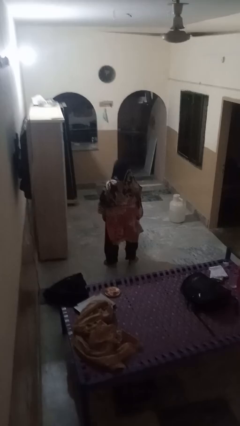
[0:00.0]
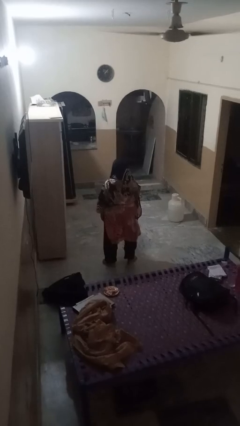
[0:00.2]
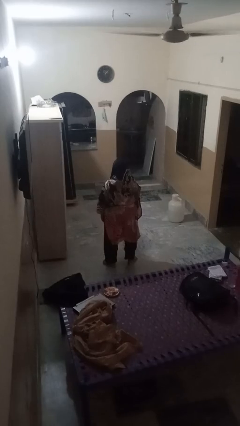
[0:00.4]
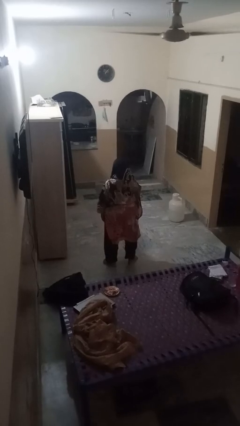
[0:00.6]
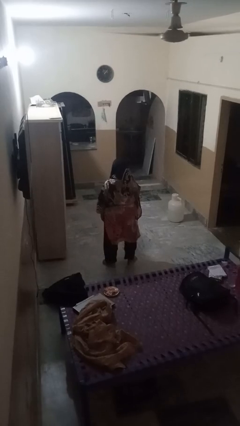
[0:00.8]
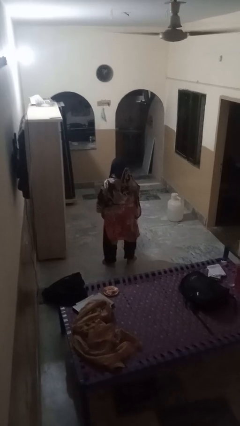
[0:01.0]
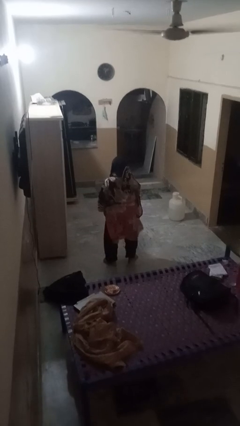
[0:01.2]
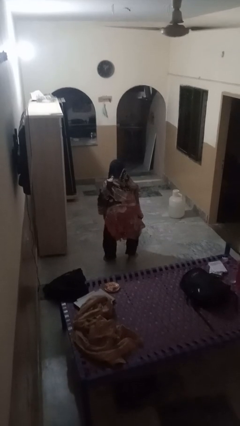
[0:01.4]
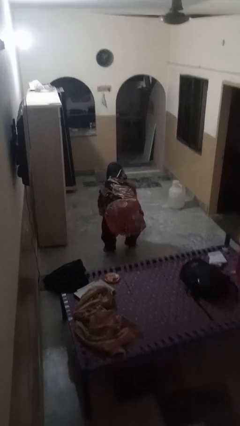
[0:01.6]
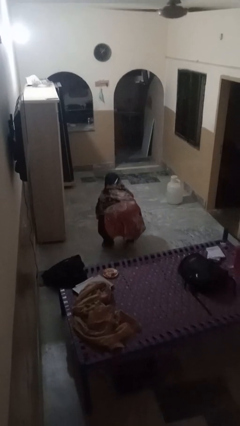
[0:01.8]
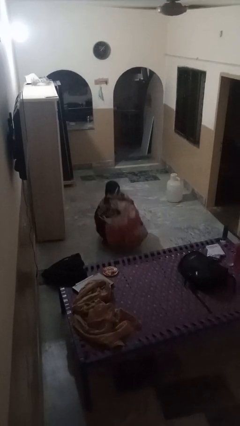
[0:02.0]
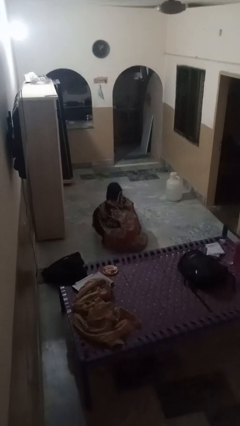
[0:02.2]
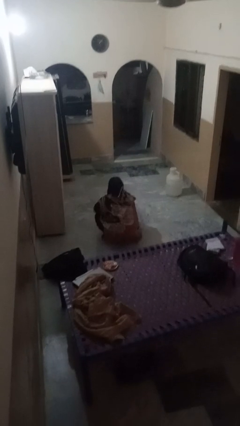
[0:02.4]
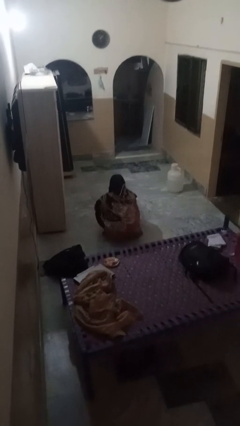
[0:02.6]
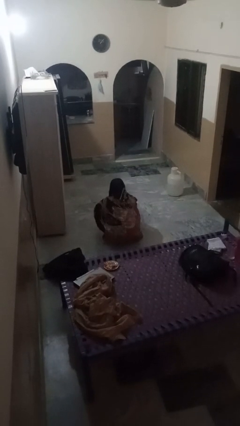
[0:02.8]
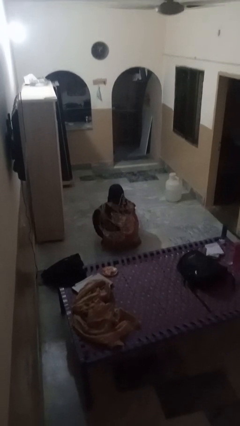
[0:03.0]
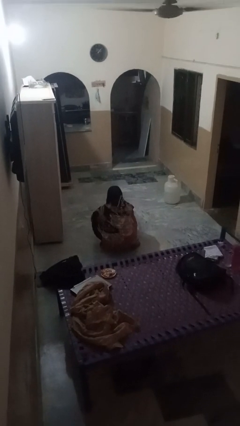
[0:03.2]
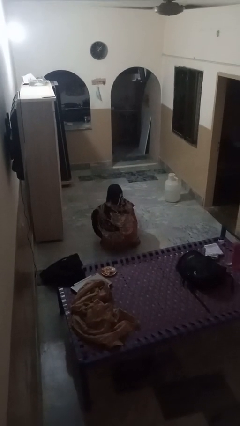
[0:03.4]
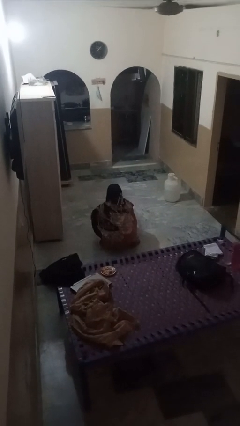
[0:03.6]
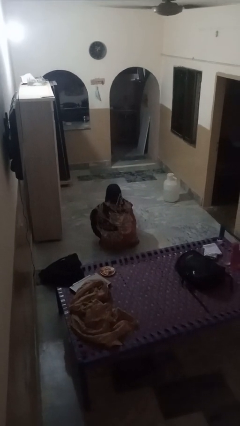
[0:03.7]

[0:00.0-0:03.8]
person squats

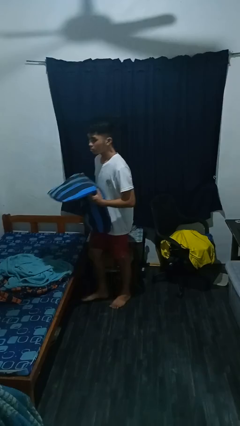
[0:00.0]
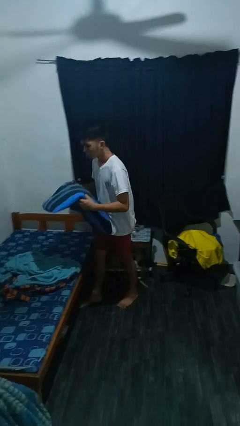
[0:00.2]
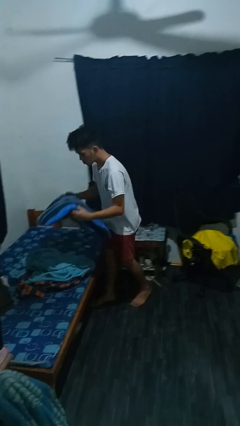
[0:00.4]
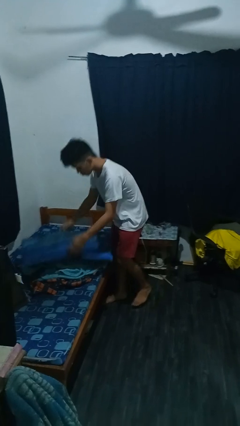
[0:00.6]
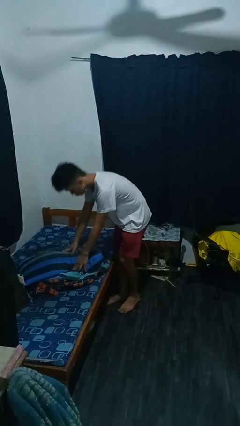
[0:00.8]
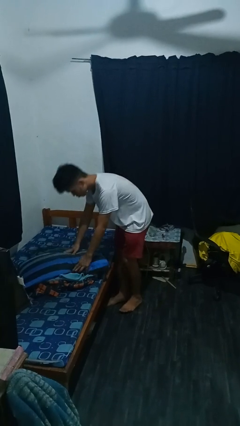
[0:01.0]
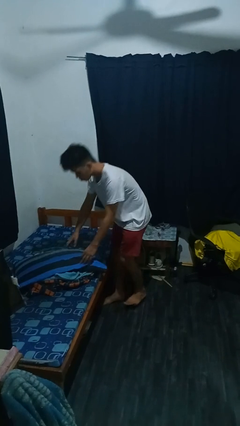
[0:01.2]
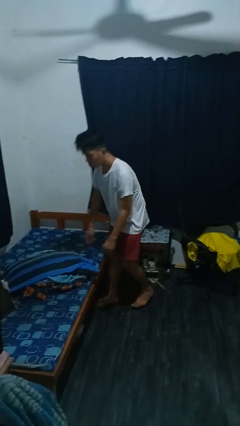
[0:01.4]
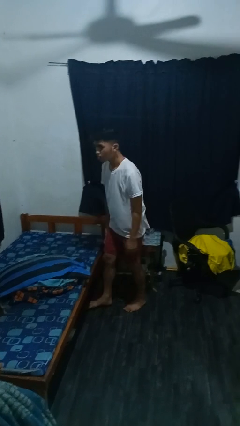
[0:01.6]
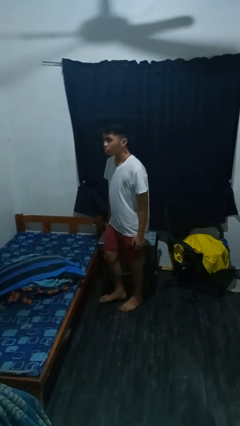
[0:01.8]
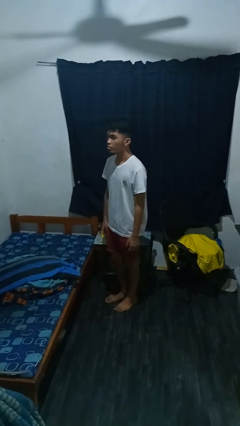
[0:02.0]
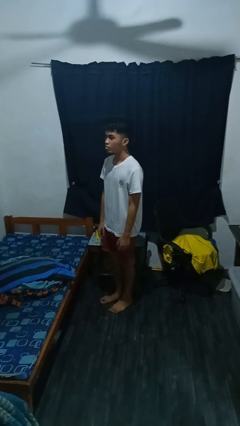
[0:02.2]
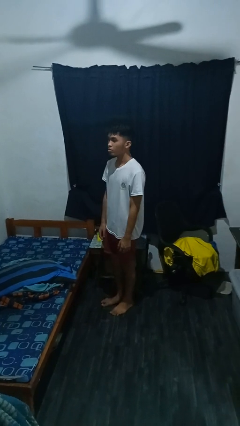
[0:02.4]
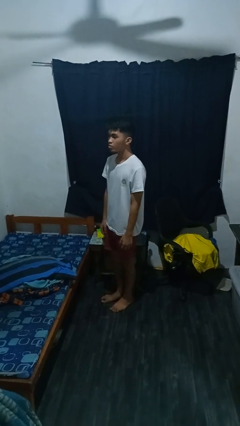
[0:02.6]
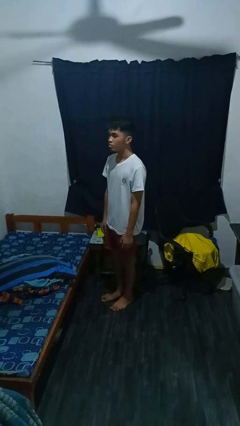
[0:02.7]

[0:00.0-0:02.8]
person puts down object on bed

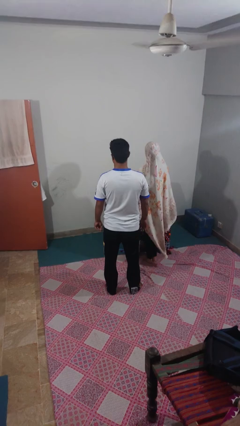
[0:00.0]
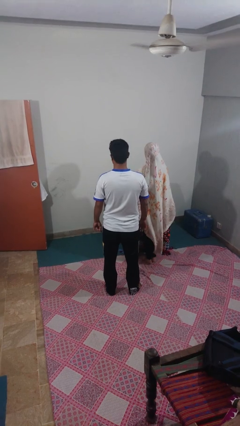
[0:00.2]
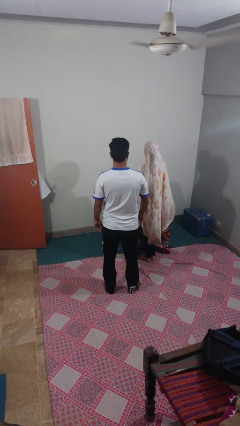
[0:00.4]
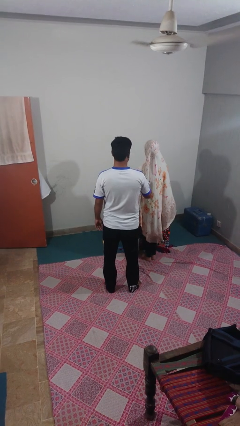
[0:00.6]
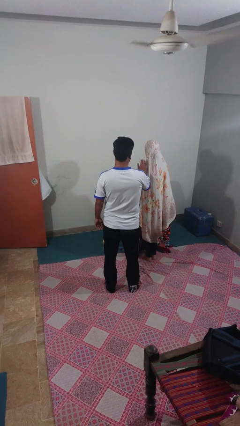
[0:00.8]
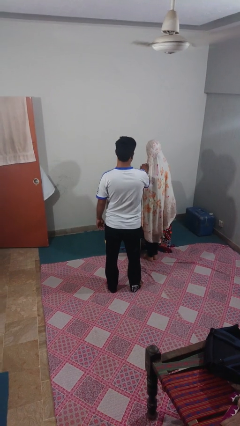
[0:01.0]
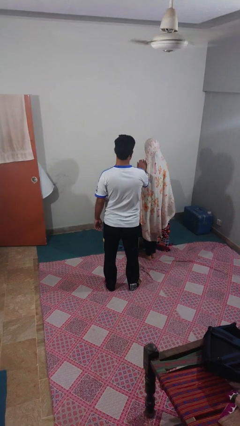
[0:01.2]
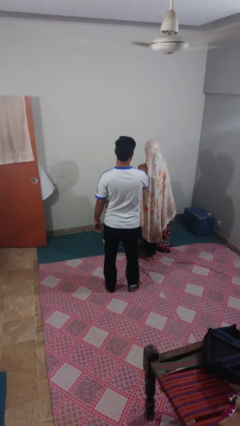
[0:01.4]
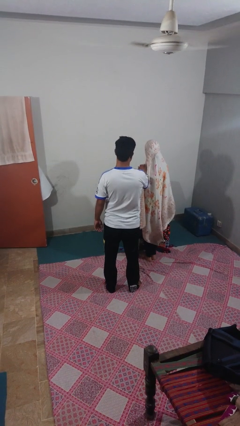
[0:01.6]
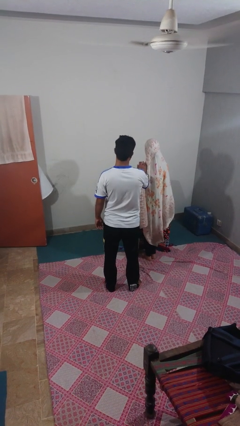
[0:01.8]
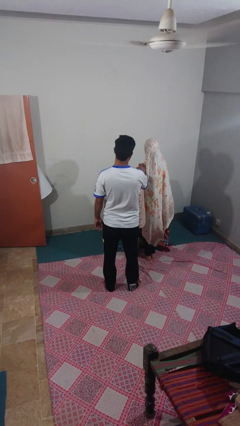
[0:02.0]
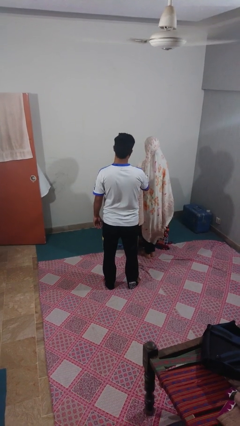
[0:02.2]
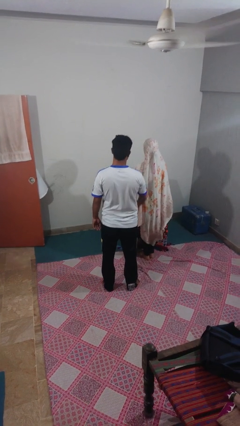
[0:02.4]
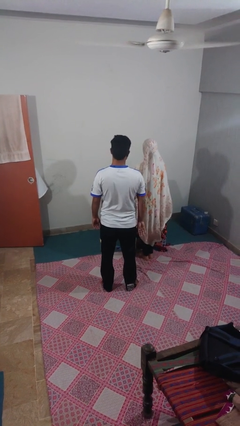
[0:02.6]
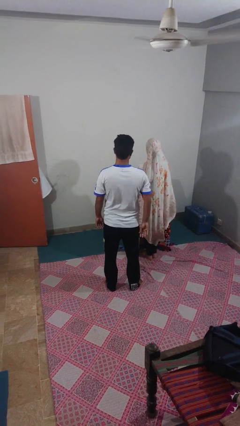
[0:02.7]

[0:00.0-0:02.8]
person touches back of person

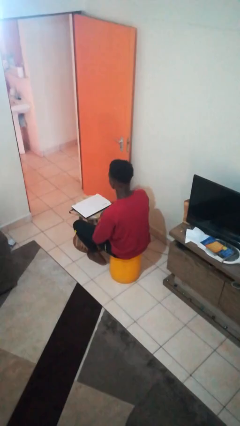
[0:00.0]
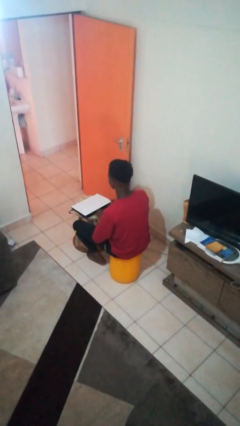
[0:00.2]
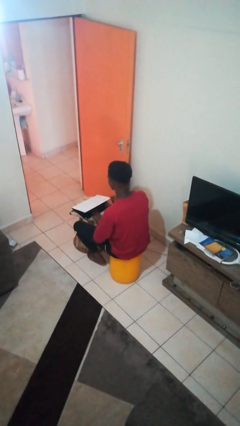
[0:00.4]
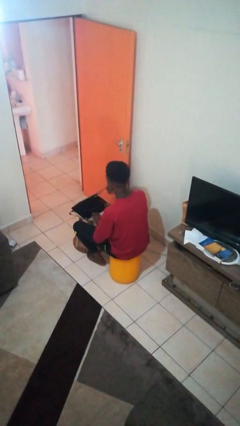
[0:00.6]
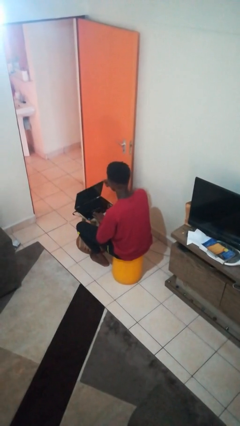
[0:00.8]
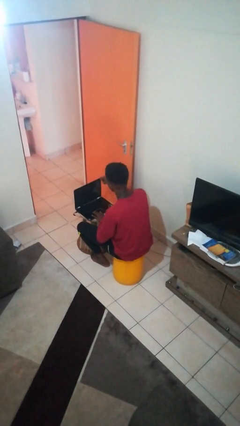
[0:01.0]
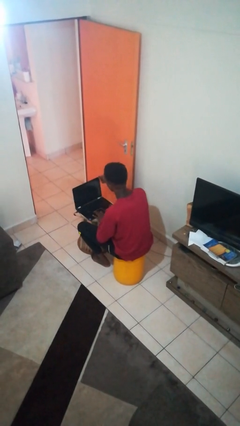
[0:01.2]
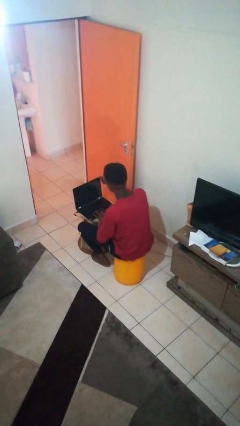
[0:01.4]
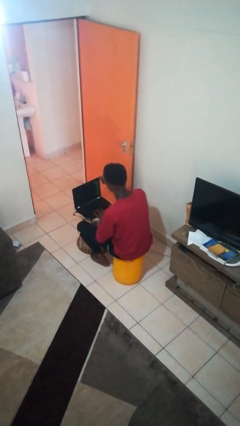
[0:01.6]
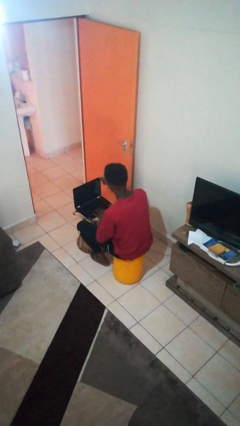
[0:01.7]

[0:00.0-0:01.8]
person opens laptop

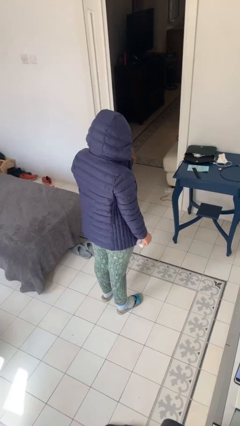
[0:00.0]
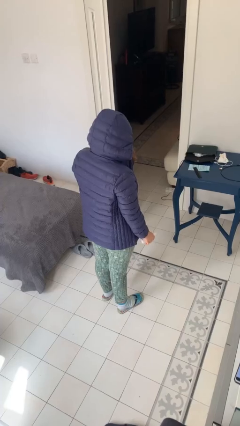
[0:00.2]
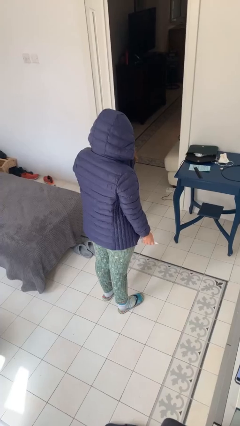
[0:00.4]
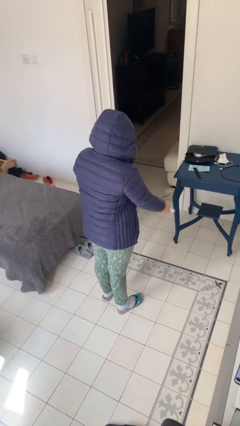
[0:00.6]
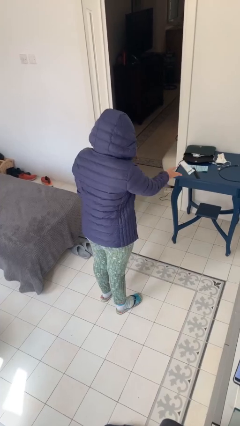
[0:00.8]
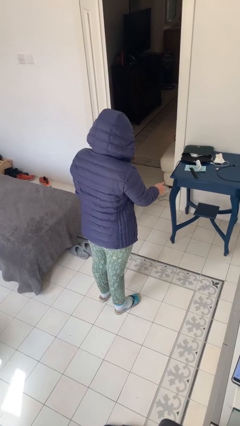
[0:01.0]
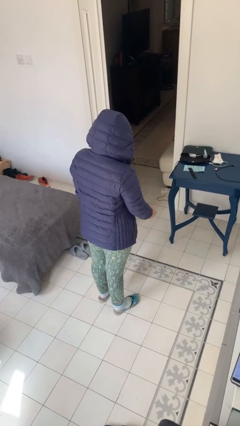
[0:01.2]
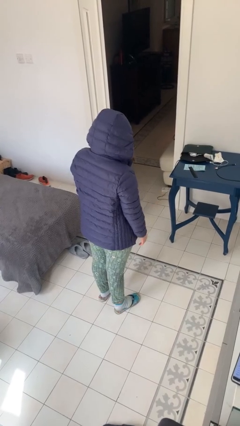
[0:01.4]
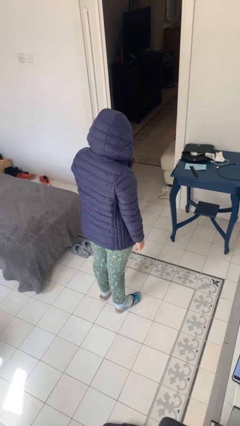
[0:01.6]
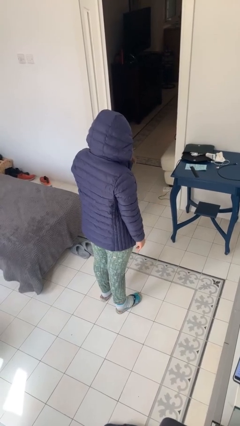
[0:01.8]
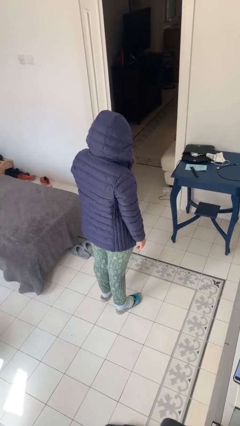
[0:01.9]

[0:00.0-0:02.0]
person throws object on table

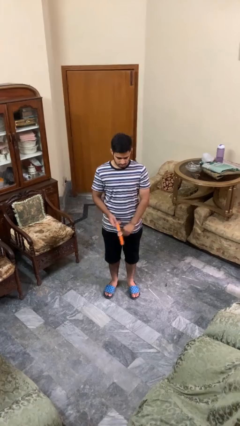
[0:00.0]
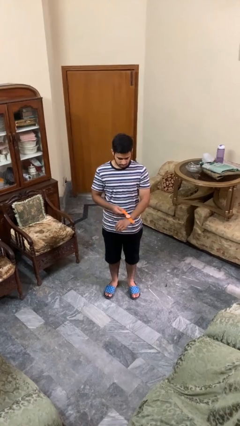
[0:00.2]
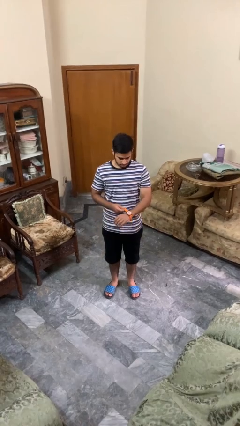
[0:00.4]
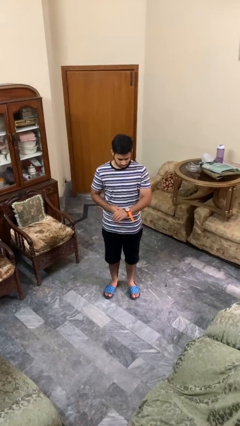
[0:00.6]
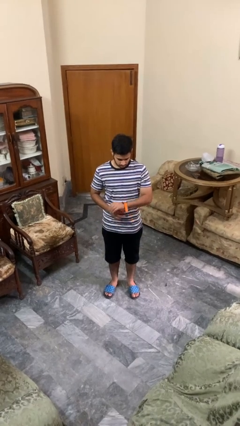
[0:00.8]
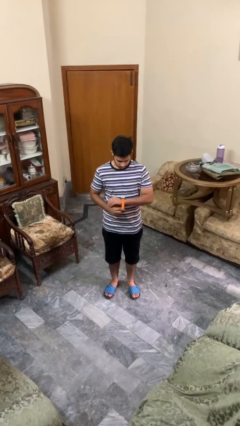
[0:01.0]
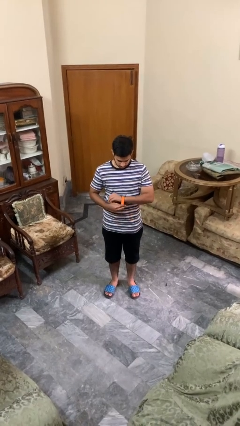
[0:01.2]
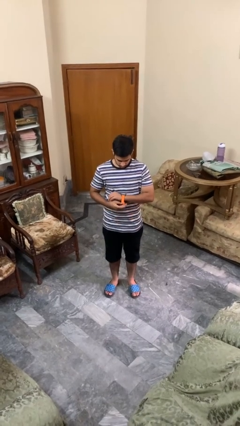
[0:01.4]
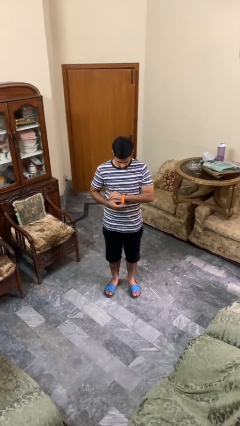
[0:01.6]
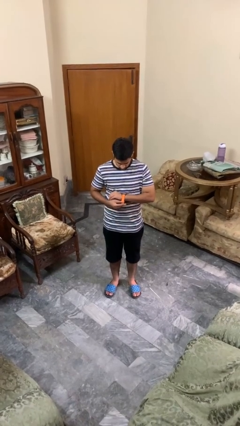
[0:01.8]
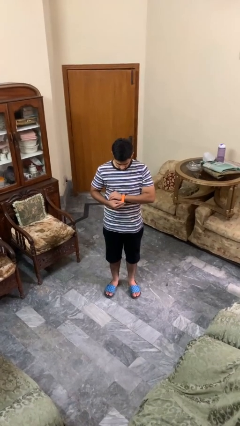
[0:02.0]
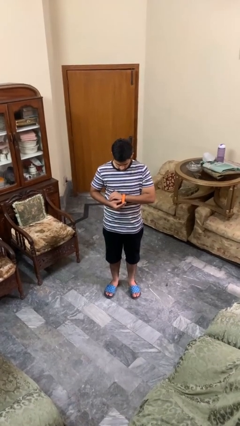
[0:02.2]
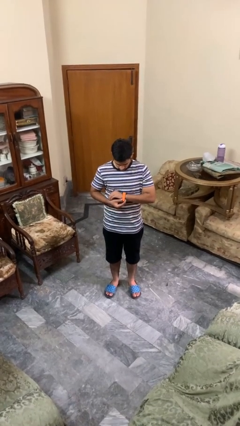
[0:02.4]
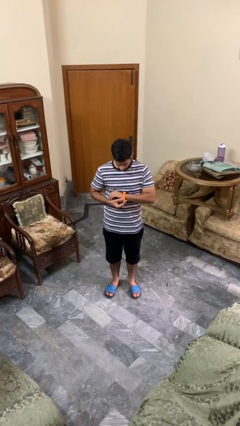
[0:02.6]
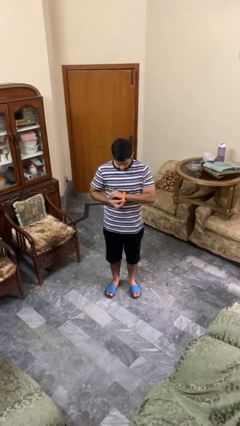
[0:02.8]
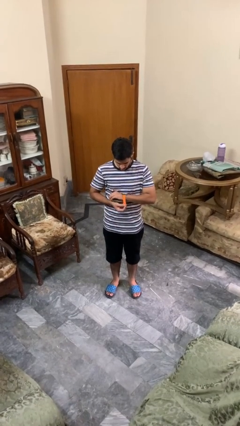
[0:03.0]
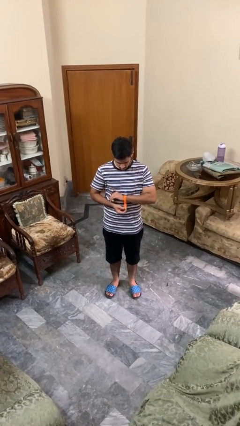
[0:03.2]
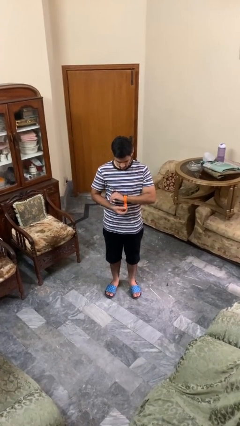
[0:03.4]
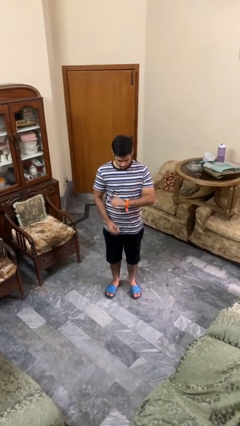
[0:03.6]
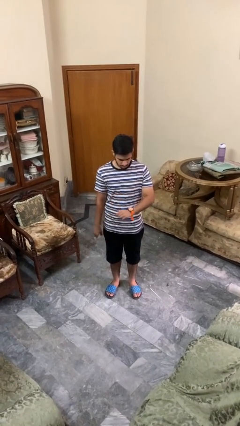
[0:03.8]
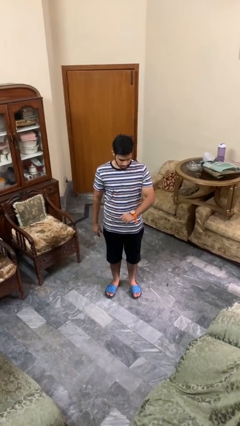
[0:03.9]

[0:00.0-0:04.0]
person puts on wristwatch
